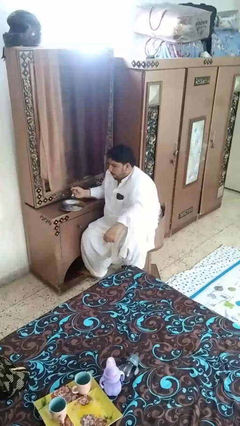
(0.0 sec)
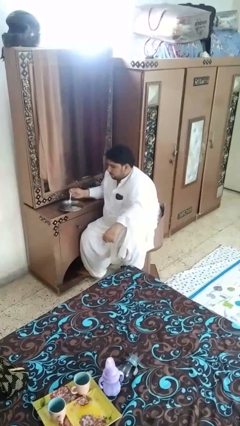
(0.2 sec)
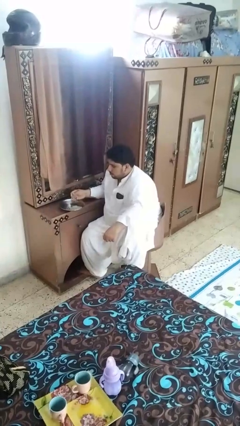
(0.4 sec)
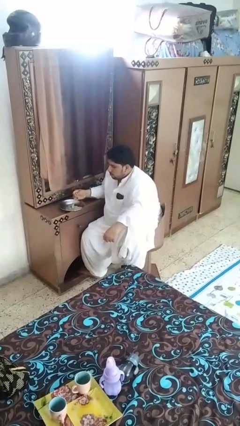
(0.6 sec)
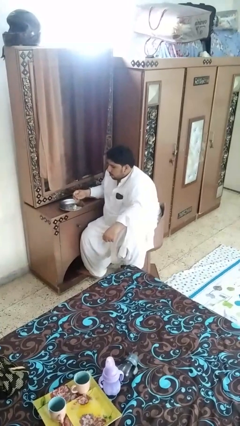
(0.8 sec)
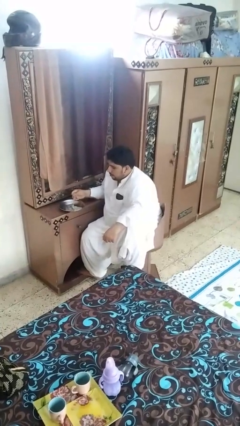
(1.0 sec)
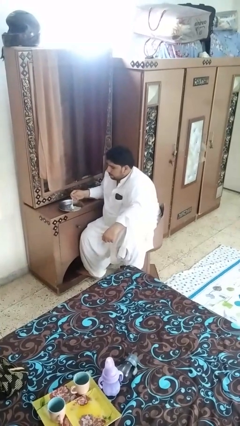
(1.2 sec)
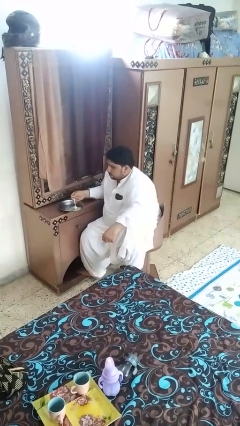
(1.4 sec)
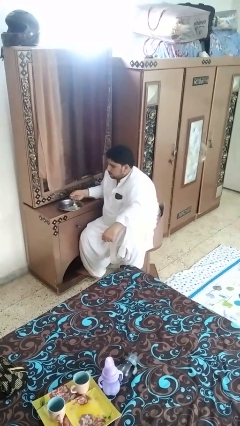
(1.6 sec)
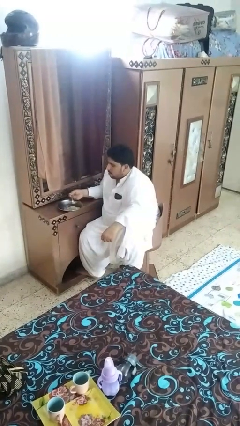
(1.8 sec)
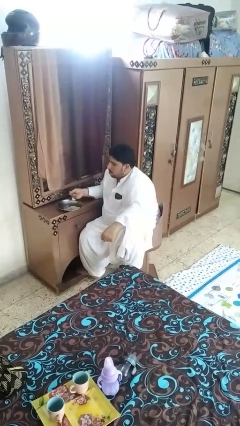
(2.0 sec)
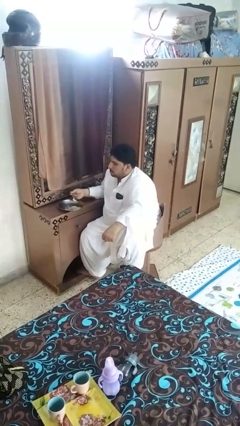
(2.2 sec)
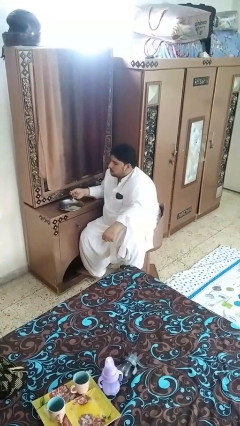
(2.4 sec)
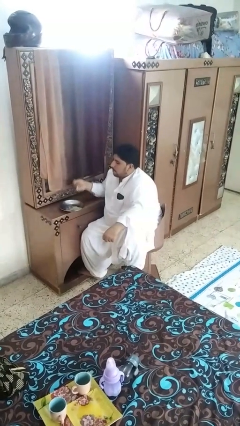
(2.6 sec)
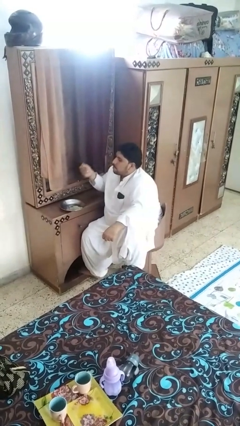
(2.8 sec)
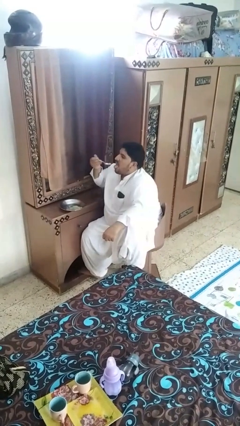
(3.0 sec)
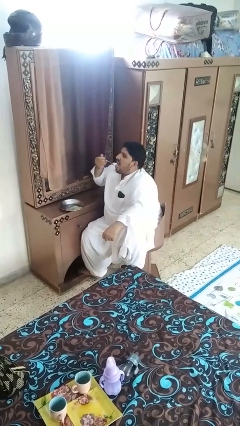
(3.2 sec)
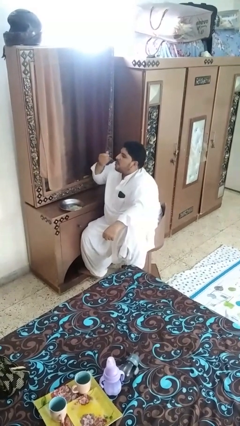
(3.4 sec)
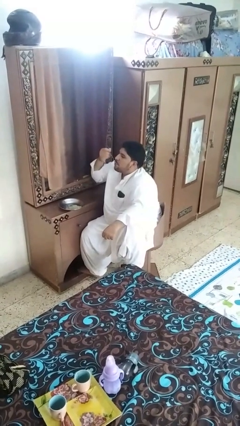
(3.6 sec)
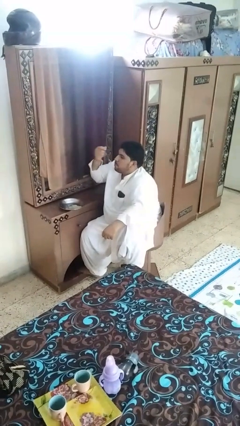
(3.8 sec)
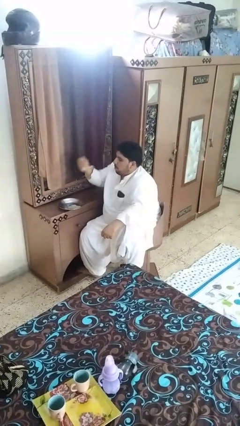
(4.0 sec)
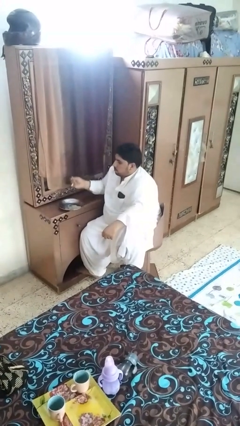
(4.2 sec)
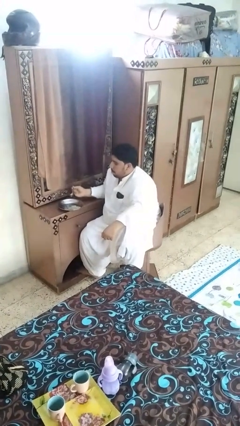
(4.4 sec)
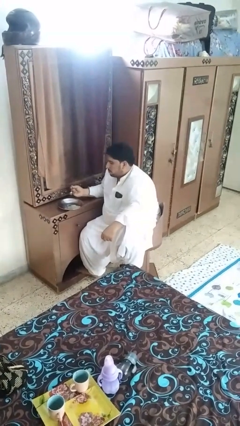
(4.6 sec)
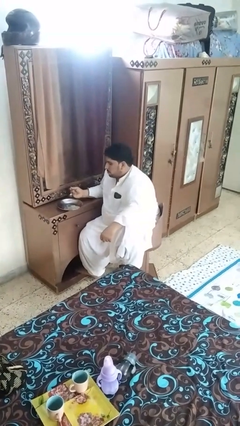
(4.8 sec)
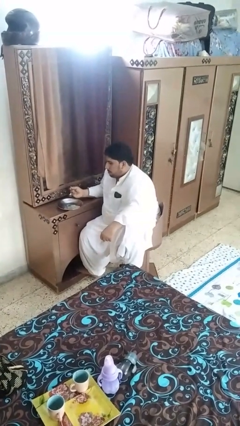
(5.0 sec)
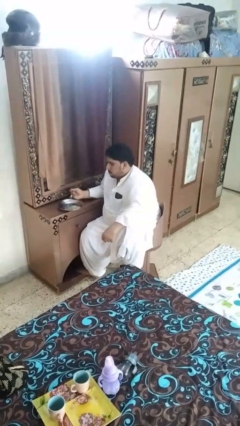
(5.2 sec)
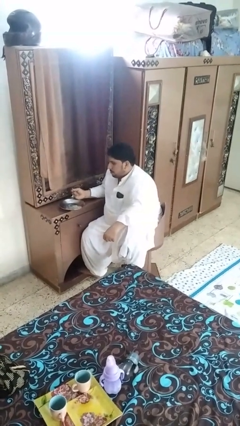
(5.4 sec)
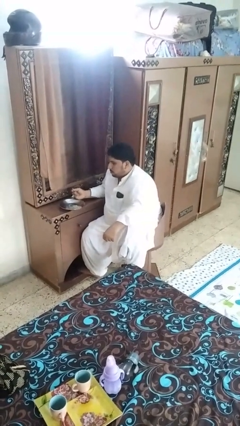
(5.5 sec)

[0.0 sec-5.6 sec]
person eats with utensil

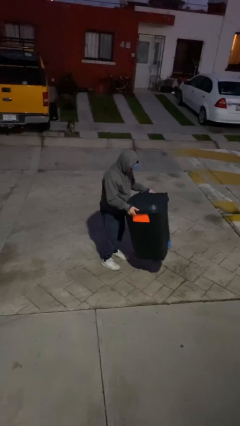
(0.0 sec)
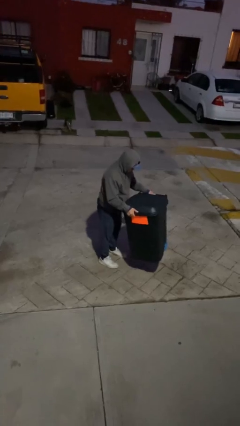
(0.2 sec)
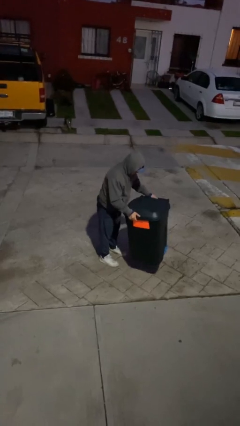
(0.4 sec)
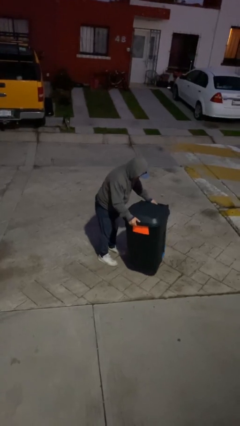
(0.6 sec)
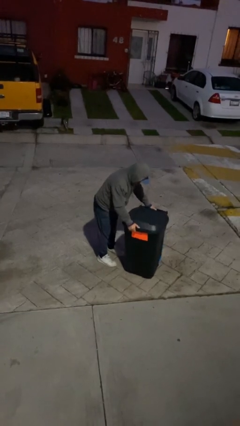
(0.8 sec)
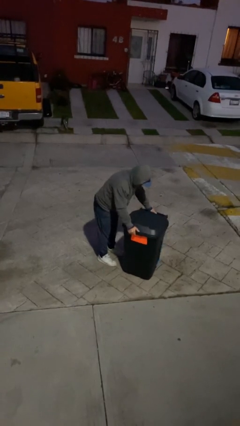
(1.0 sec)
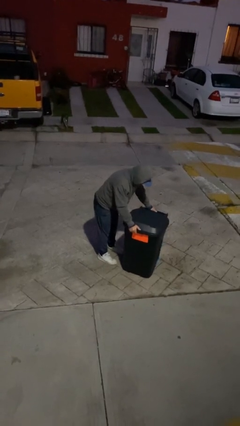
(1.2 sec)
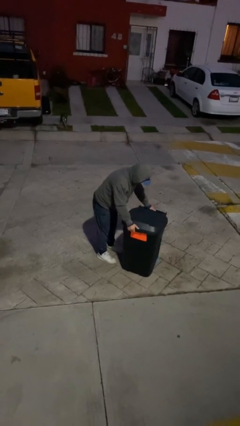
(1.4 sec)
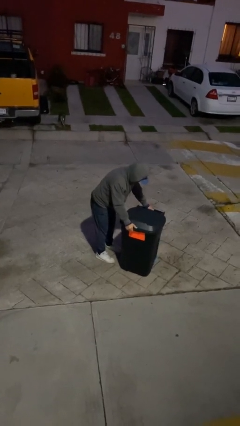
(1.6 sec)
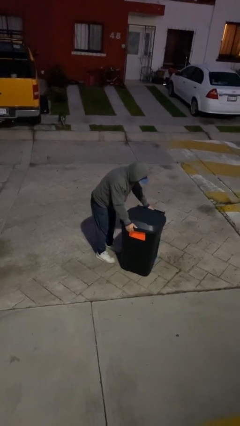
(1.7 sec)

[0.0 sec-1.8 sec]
person puts down object on floor

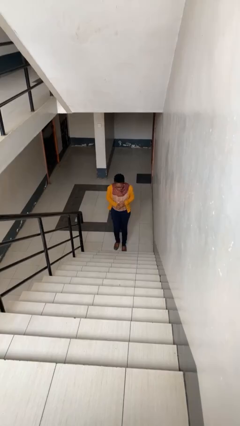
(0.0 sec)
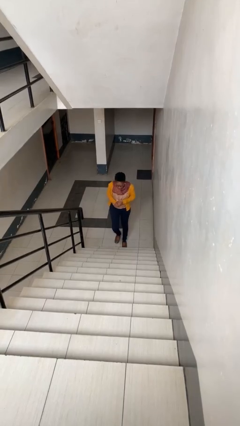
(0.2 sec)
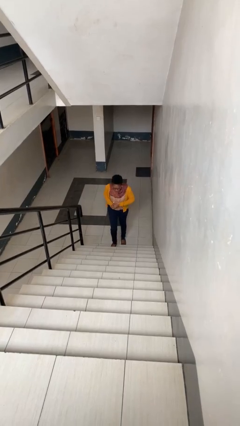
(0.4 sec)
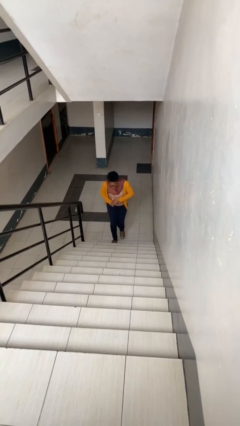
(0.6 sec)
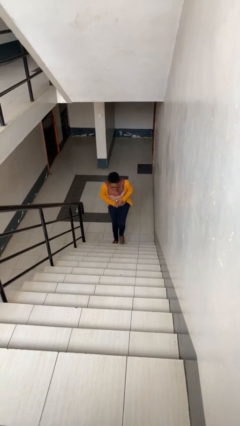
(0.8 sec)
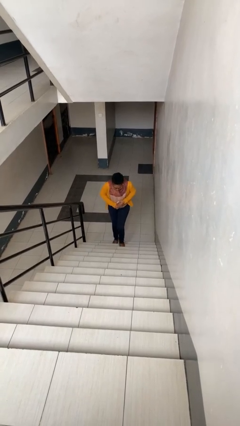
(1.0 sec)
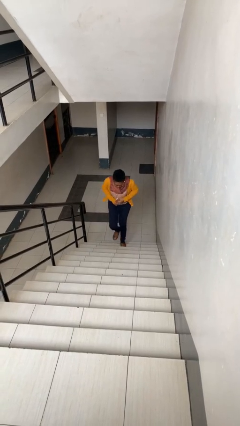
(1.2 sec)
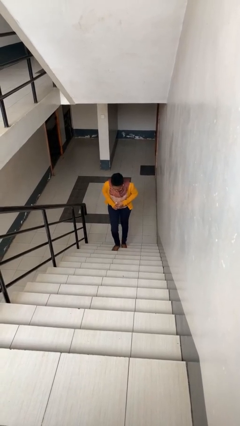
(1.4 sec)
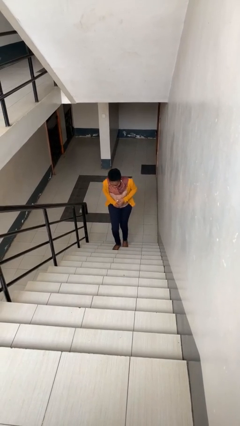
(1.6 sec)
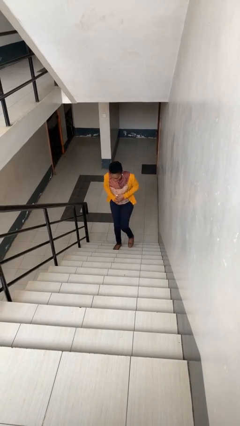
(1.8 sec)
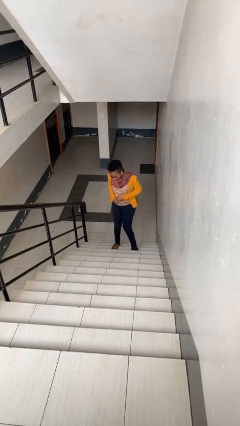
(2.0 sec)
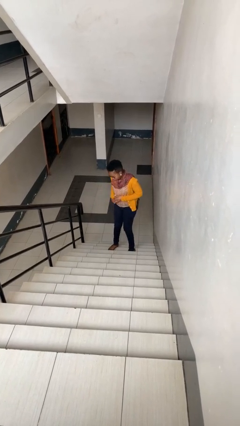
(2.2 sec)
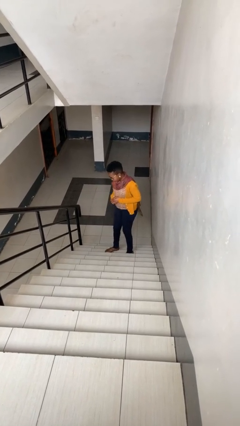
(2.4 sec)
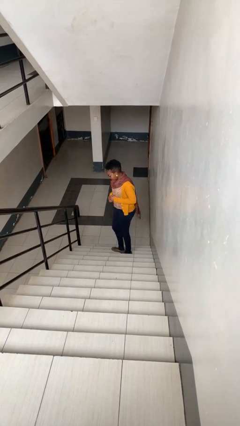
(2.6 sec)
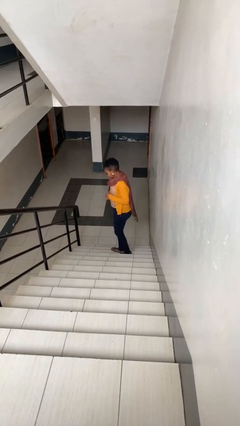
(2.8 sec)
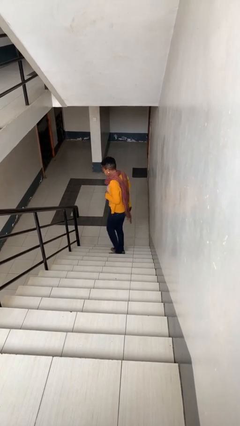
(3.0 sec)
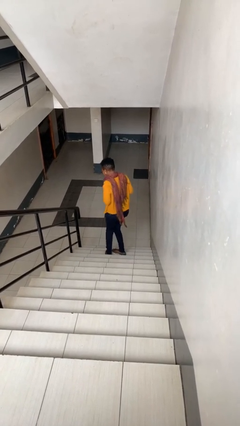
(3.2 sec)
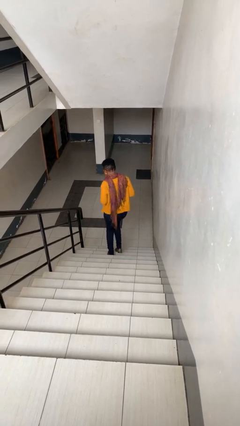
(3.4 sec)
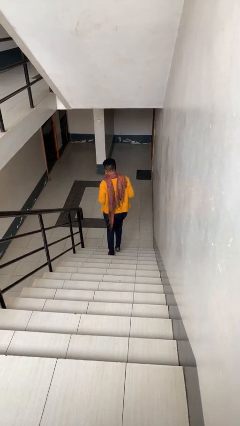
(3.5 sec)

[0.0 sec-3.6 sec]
person climbs up stairs

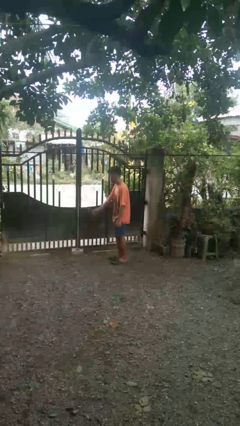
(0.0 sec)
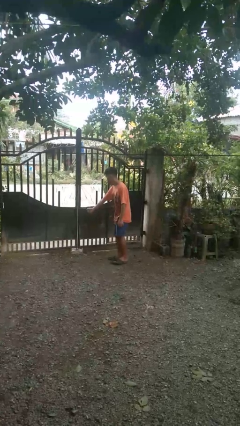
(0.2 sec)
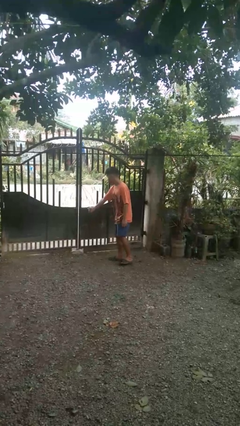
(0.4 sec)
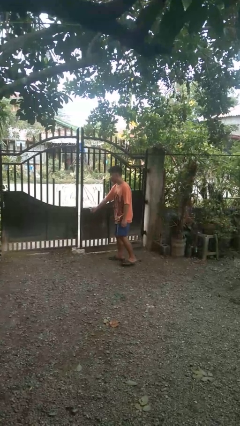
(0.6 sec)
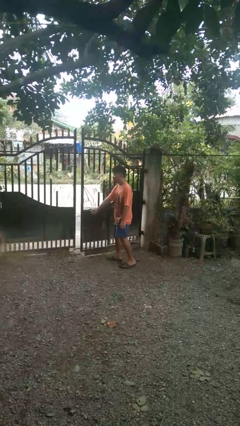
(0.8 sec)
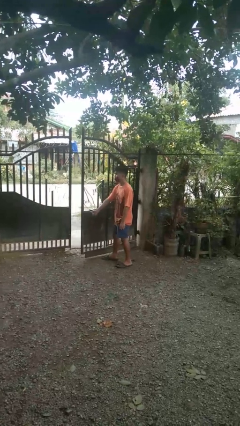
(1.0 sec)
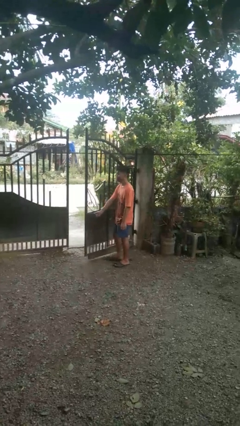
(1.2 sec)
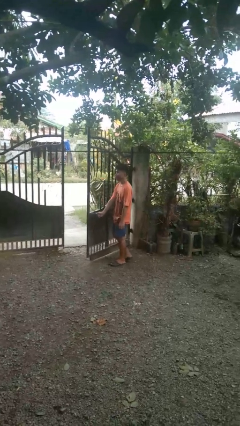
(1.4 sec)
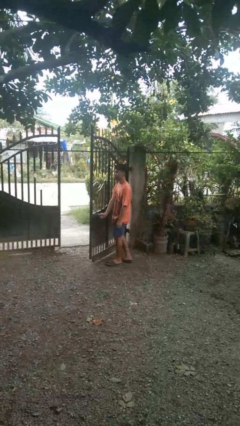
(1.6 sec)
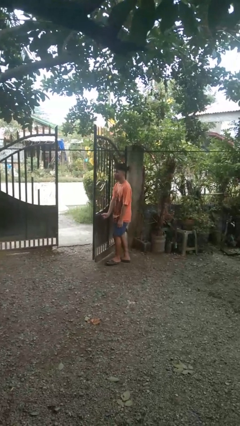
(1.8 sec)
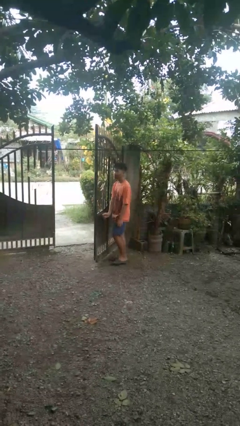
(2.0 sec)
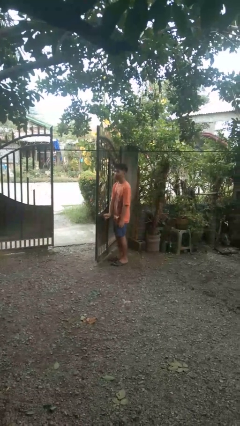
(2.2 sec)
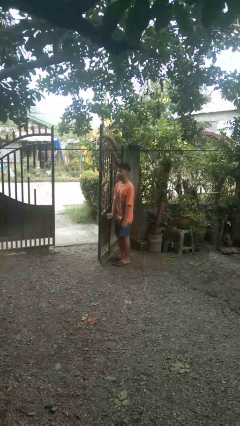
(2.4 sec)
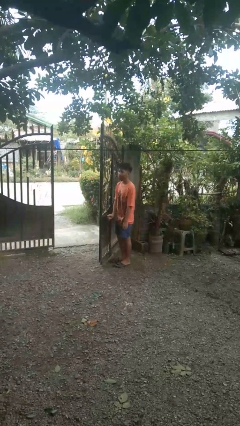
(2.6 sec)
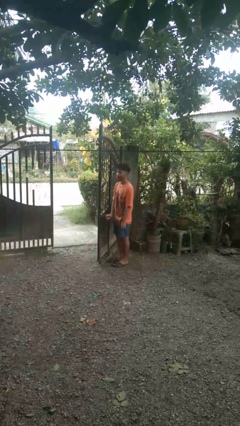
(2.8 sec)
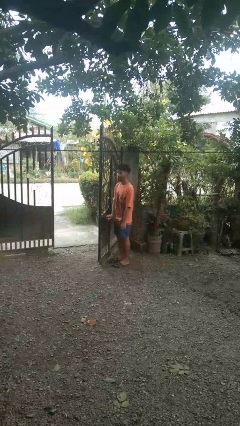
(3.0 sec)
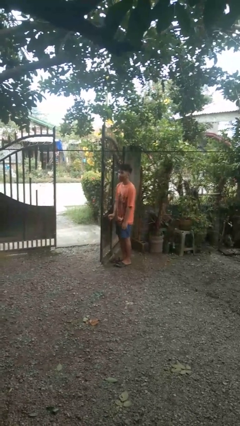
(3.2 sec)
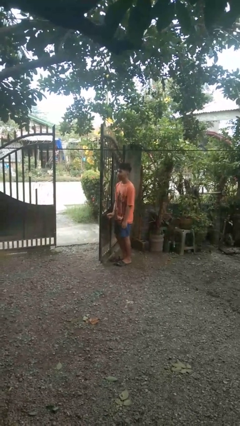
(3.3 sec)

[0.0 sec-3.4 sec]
person opens gate

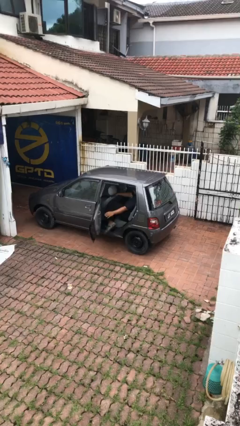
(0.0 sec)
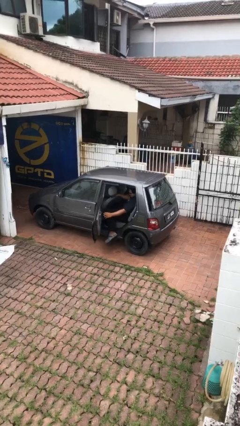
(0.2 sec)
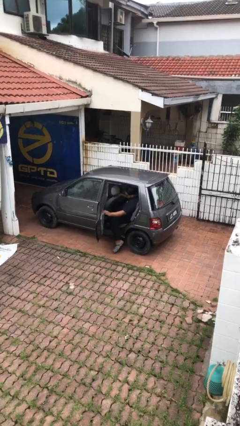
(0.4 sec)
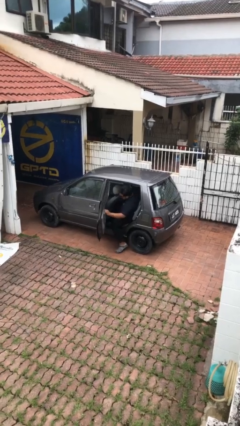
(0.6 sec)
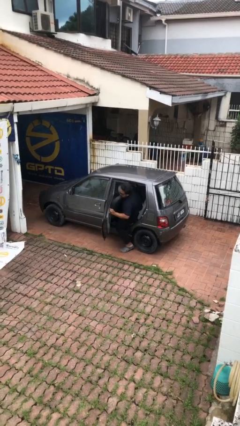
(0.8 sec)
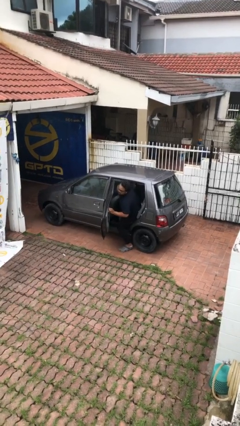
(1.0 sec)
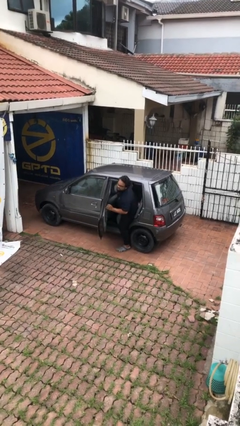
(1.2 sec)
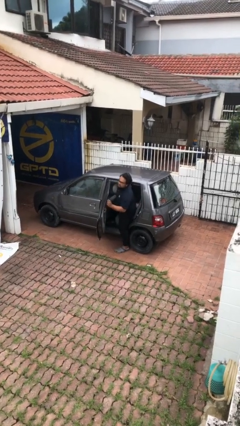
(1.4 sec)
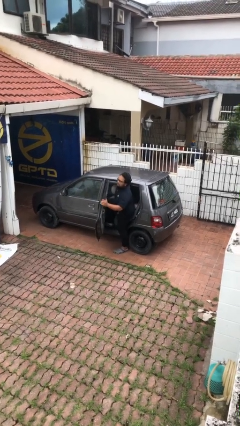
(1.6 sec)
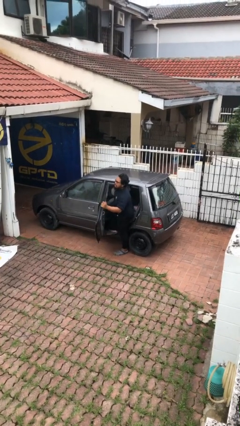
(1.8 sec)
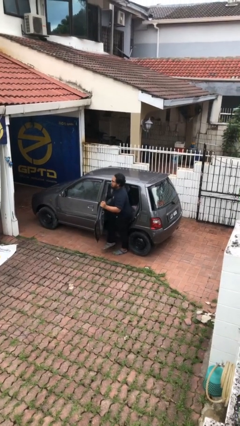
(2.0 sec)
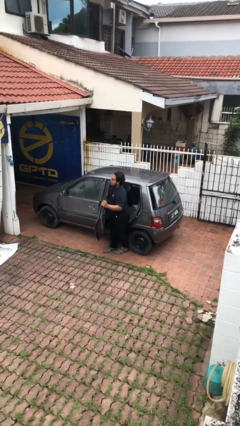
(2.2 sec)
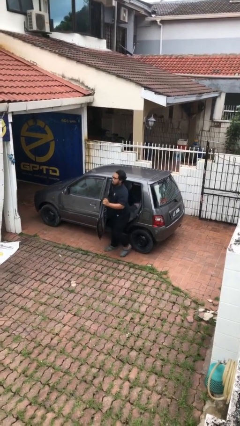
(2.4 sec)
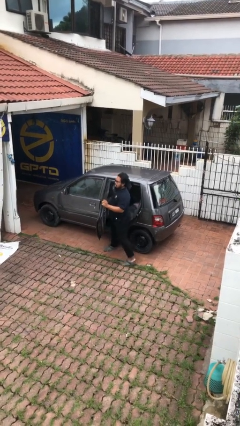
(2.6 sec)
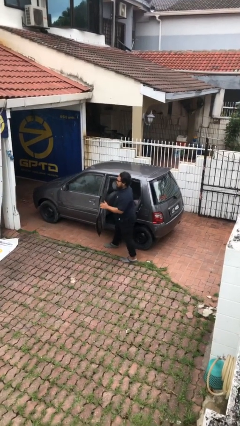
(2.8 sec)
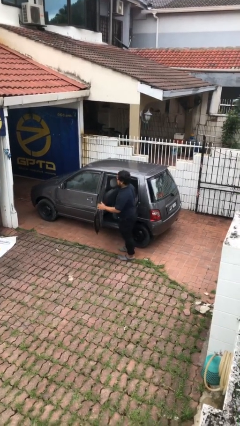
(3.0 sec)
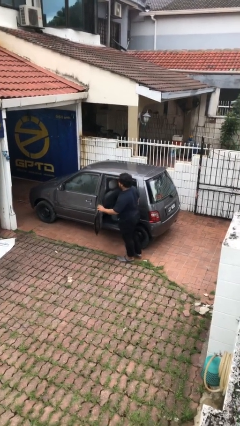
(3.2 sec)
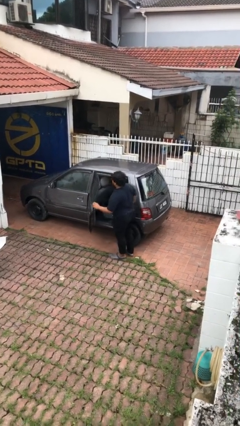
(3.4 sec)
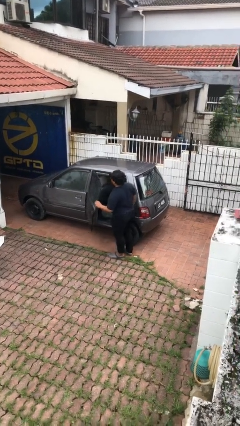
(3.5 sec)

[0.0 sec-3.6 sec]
person exits car
